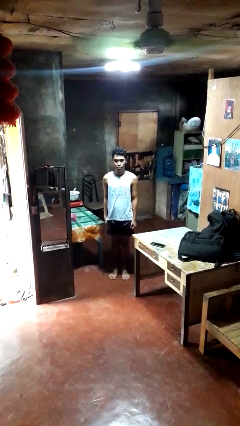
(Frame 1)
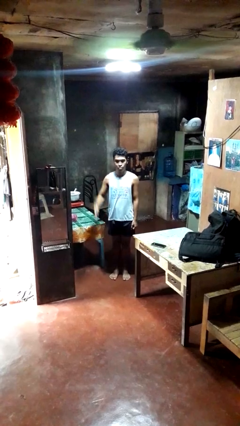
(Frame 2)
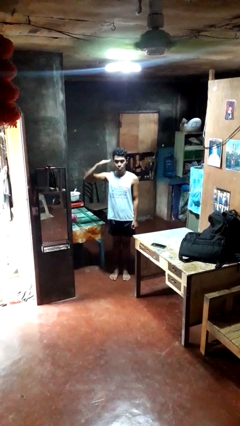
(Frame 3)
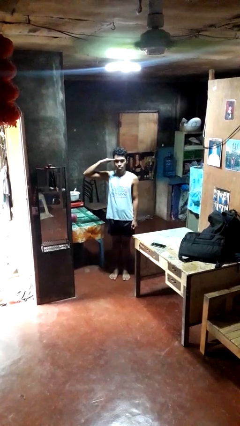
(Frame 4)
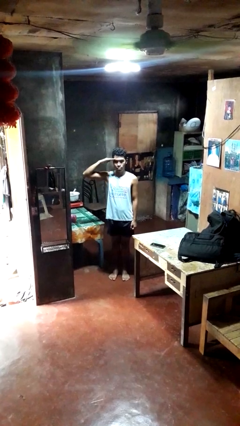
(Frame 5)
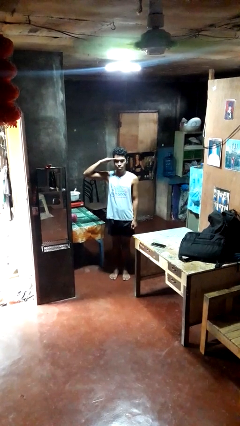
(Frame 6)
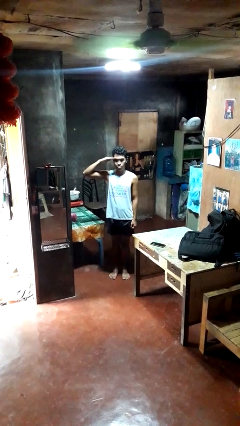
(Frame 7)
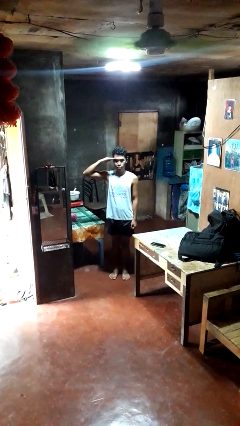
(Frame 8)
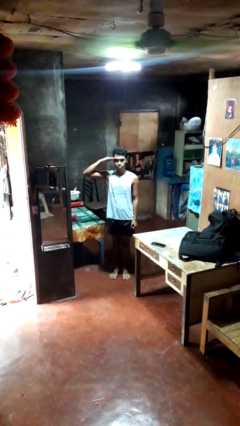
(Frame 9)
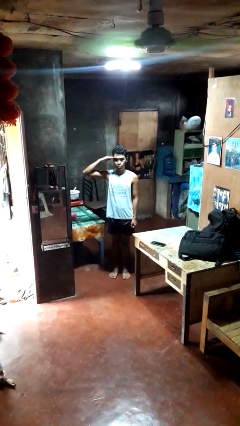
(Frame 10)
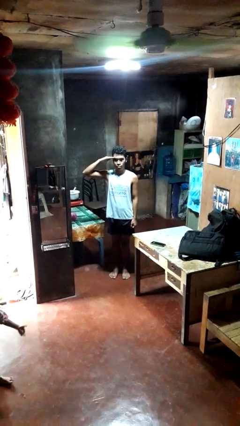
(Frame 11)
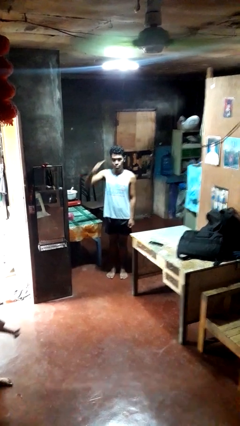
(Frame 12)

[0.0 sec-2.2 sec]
person salutes

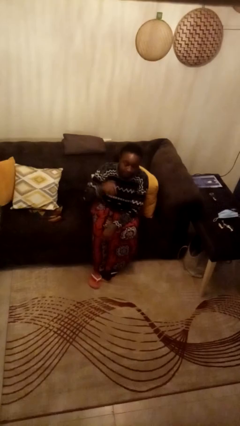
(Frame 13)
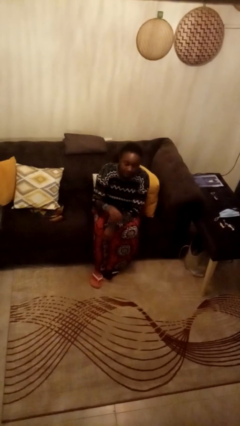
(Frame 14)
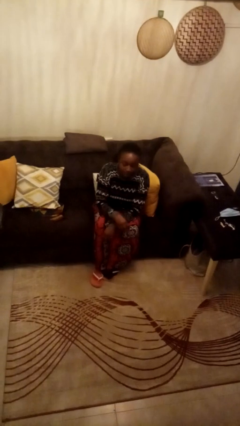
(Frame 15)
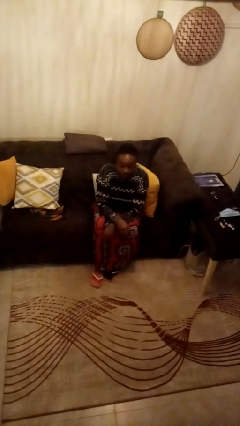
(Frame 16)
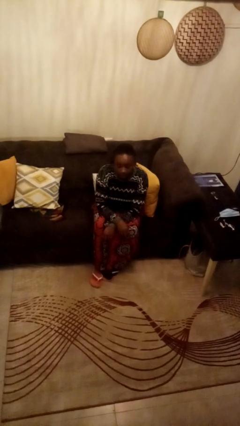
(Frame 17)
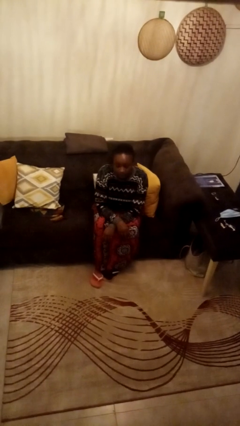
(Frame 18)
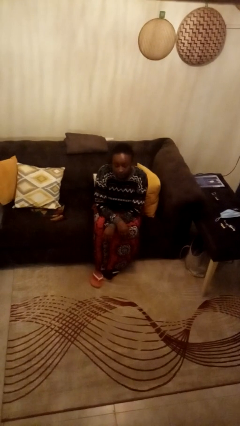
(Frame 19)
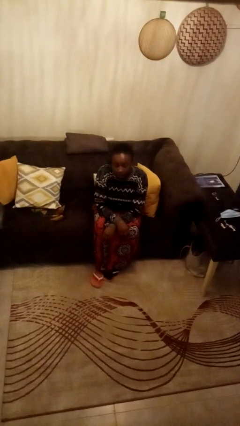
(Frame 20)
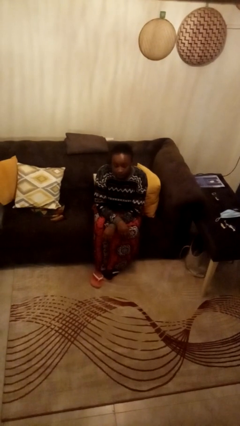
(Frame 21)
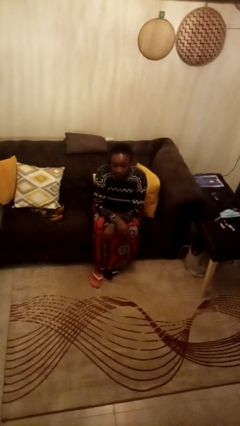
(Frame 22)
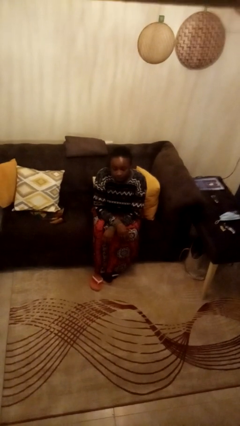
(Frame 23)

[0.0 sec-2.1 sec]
person gestures lower hand

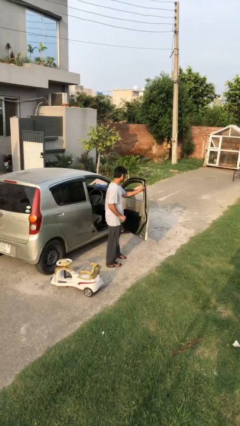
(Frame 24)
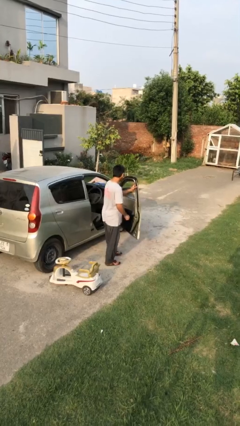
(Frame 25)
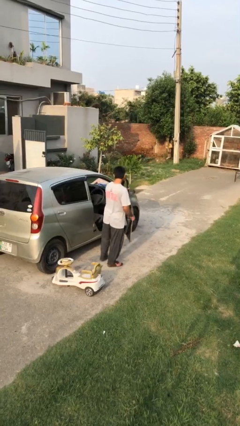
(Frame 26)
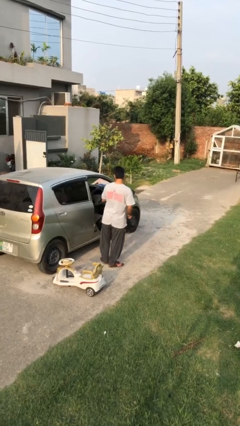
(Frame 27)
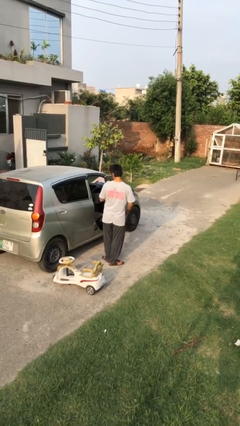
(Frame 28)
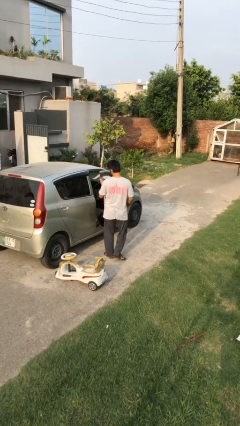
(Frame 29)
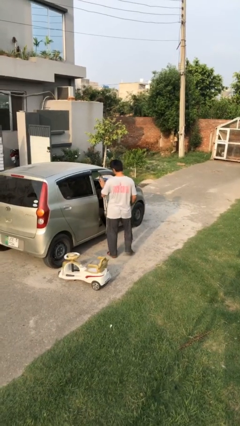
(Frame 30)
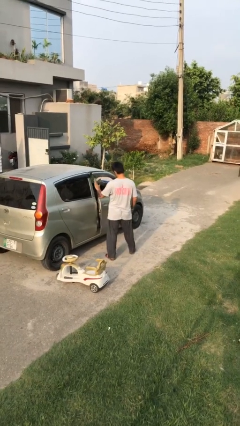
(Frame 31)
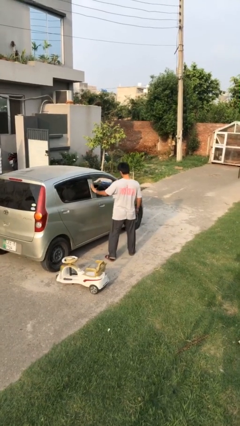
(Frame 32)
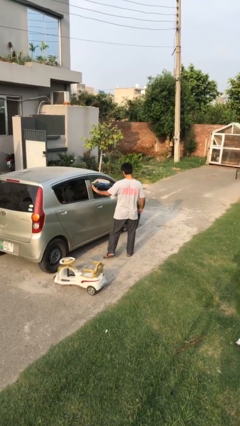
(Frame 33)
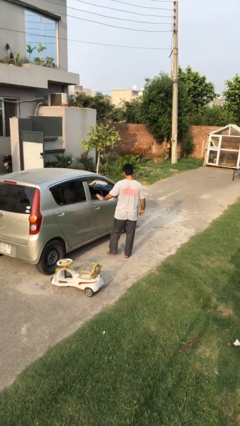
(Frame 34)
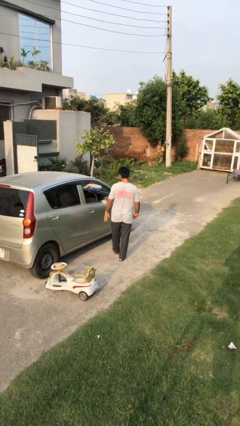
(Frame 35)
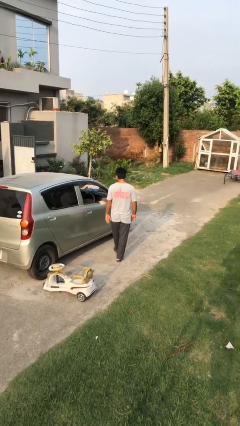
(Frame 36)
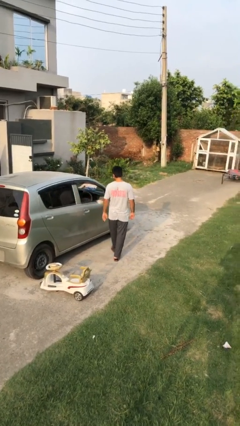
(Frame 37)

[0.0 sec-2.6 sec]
person closes car door

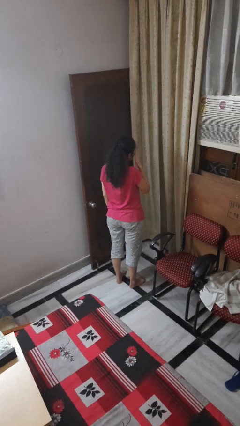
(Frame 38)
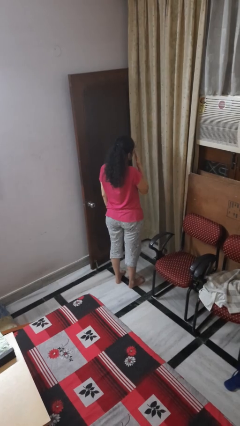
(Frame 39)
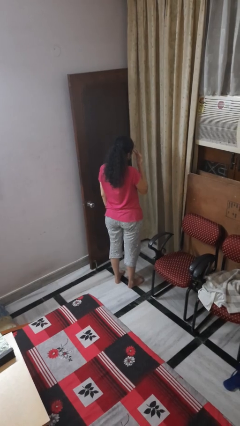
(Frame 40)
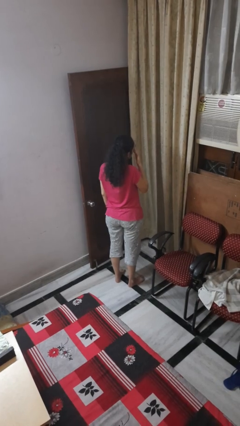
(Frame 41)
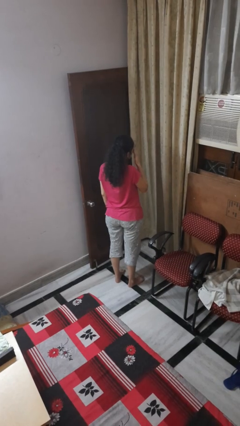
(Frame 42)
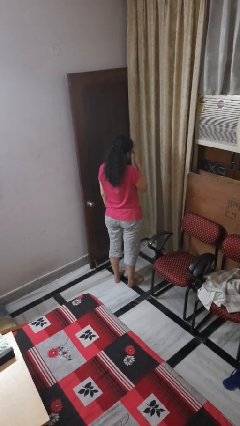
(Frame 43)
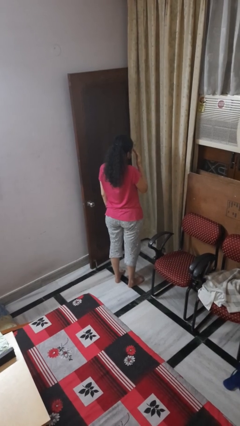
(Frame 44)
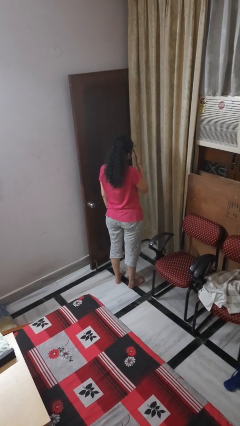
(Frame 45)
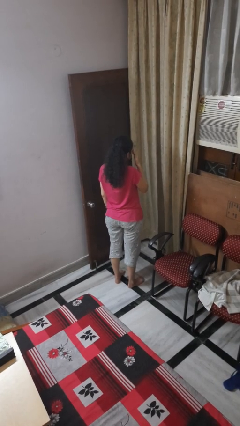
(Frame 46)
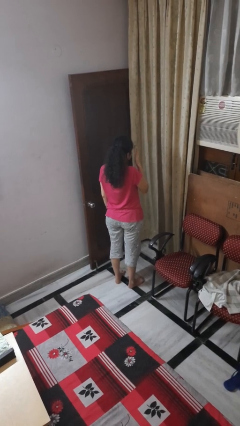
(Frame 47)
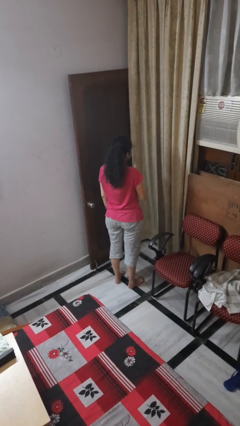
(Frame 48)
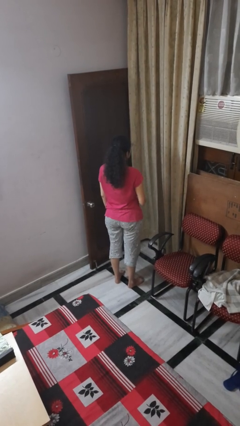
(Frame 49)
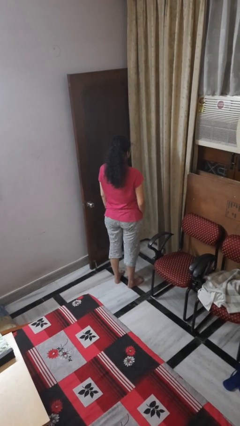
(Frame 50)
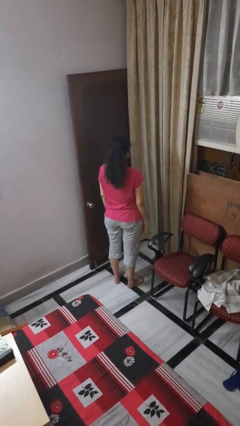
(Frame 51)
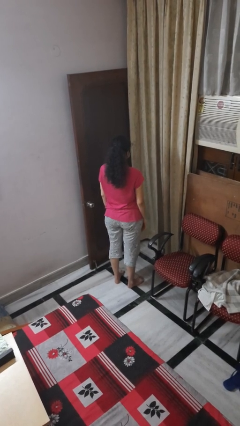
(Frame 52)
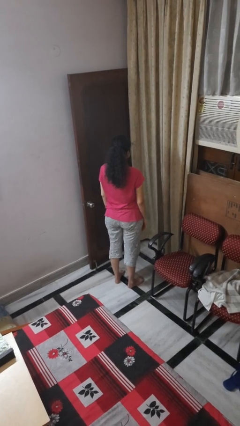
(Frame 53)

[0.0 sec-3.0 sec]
person rubs eyes

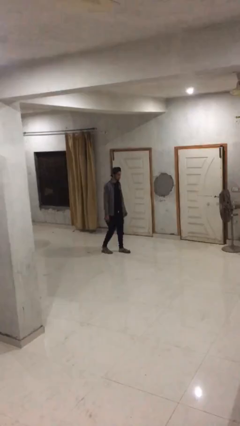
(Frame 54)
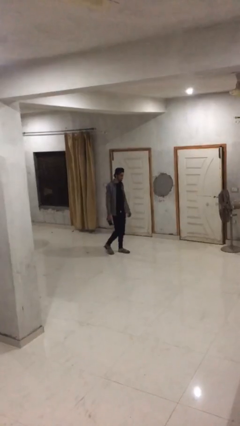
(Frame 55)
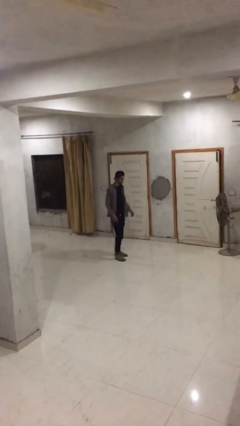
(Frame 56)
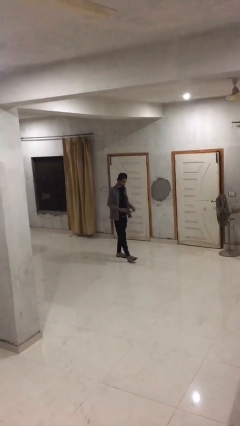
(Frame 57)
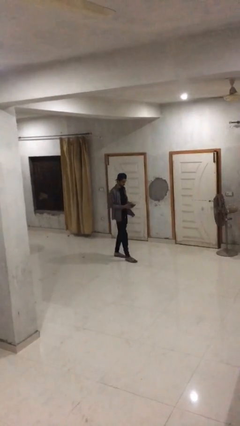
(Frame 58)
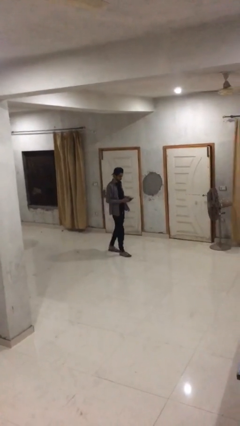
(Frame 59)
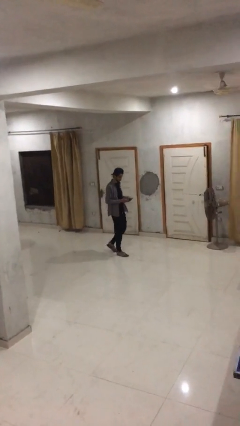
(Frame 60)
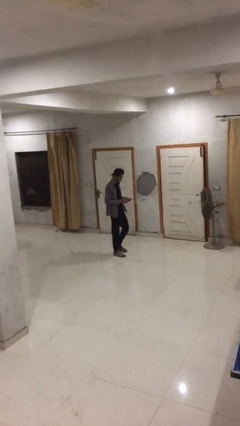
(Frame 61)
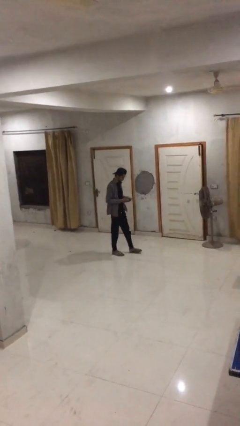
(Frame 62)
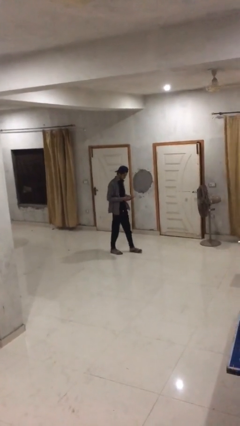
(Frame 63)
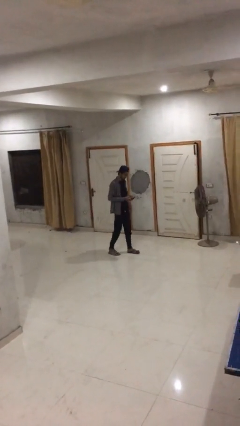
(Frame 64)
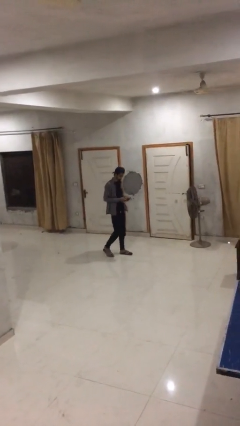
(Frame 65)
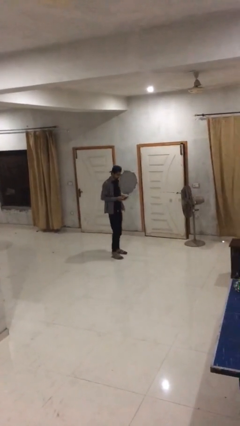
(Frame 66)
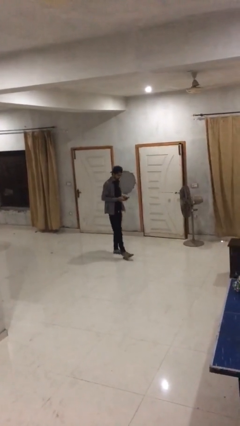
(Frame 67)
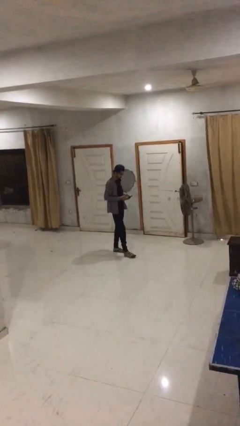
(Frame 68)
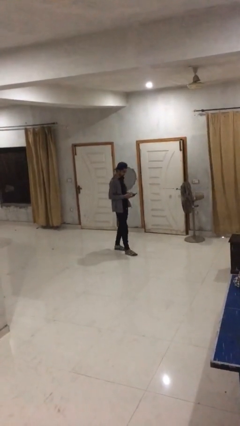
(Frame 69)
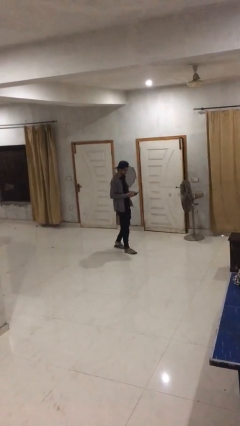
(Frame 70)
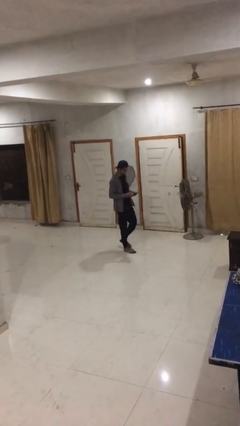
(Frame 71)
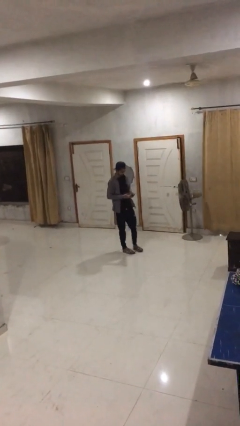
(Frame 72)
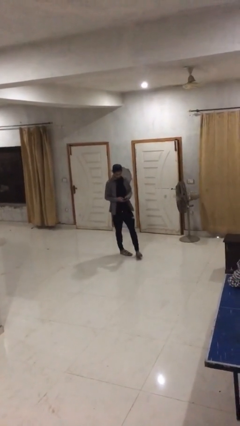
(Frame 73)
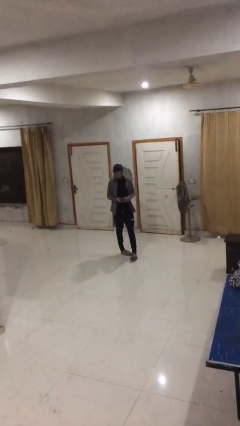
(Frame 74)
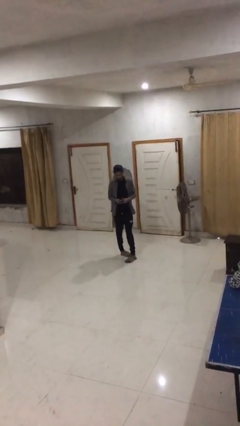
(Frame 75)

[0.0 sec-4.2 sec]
person texts on phone

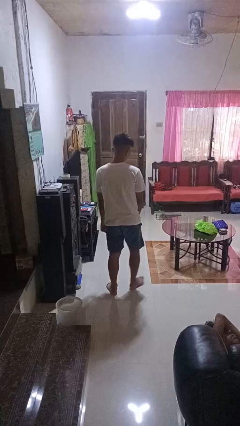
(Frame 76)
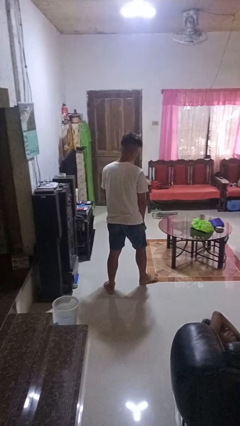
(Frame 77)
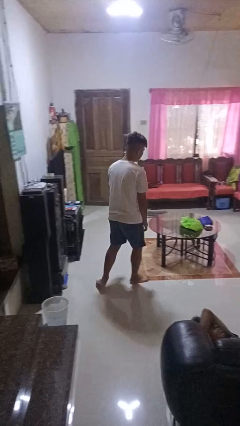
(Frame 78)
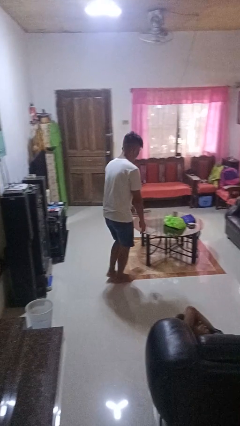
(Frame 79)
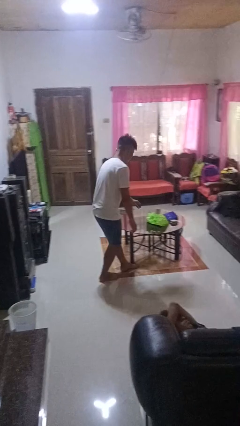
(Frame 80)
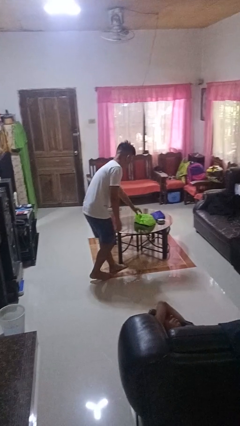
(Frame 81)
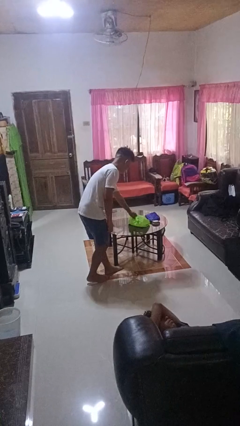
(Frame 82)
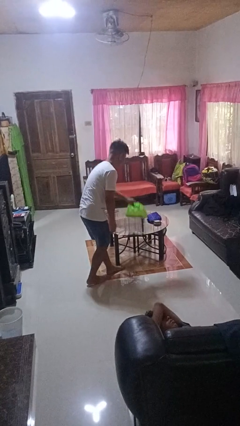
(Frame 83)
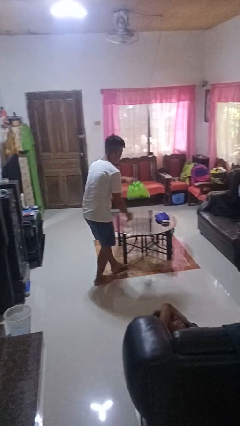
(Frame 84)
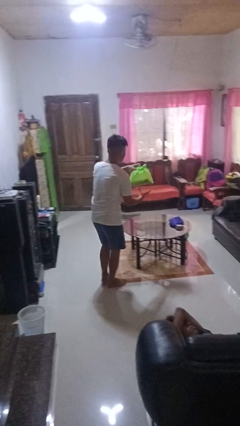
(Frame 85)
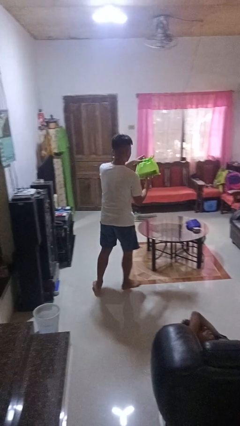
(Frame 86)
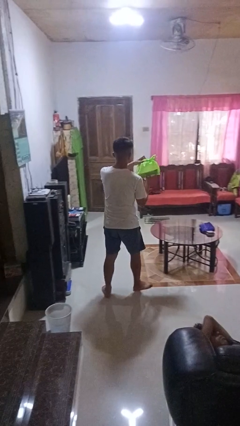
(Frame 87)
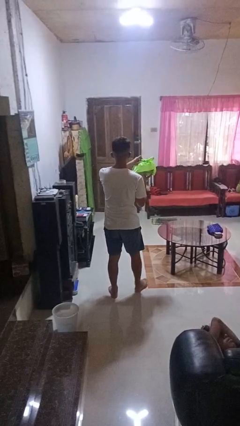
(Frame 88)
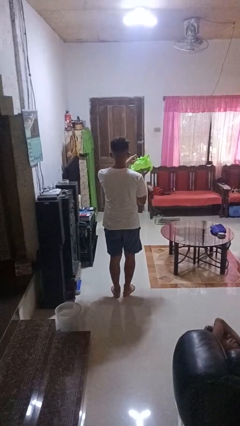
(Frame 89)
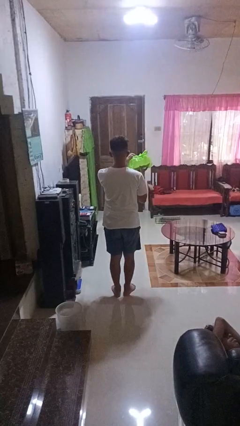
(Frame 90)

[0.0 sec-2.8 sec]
person picks up object from table

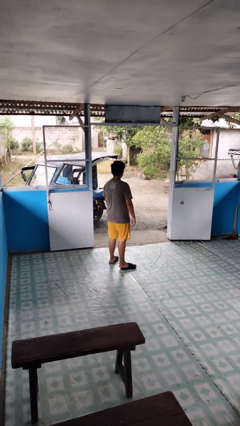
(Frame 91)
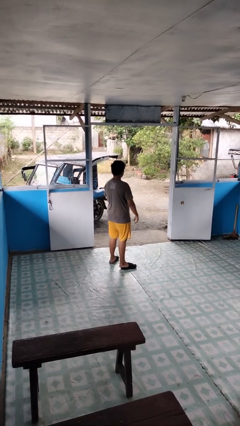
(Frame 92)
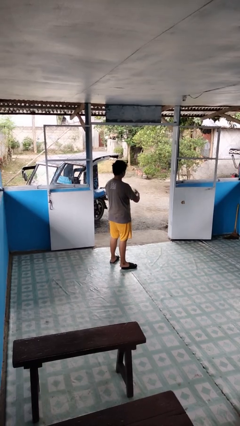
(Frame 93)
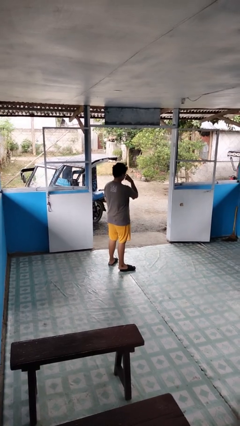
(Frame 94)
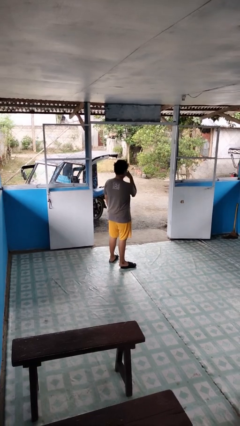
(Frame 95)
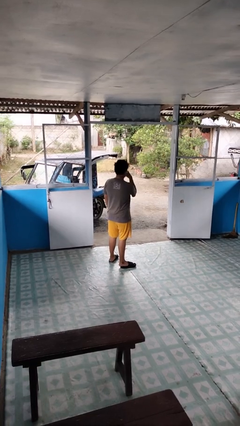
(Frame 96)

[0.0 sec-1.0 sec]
person gestures watch closely
